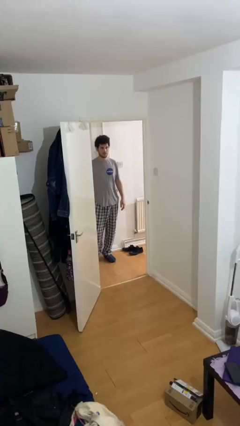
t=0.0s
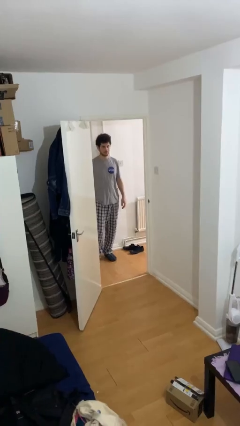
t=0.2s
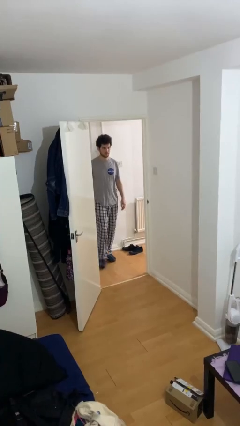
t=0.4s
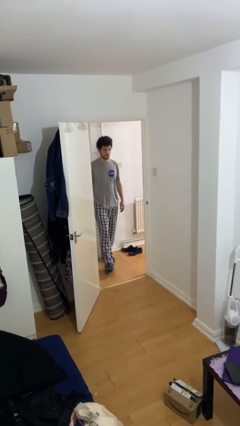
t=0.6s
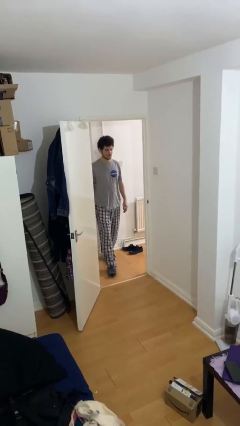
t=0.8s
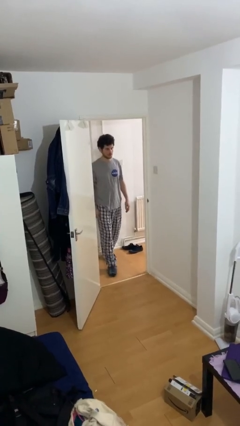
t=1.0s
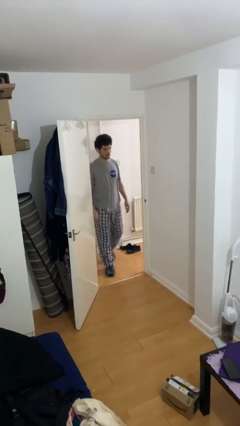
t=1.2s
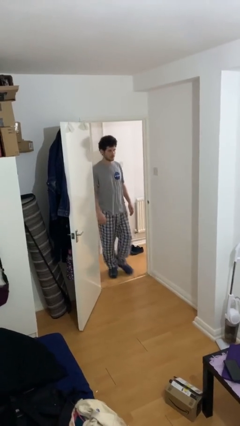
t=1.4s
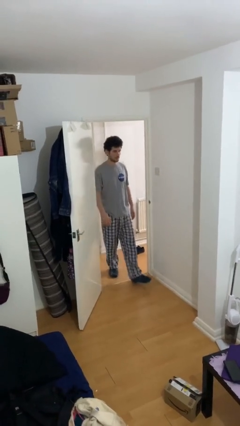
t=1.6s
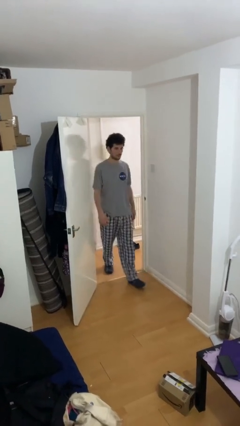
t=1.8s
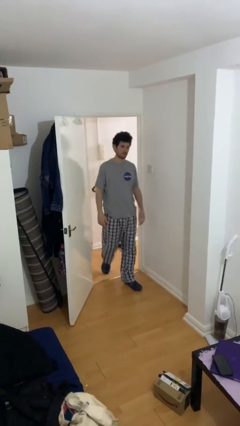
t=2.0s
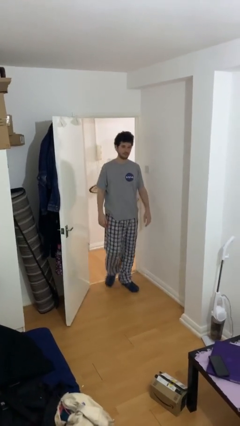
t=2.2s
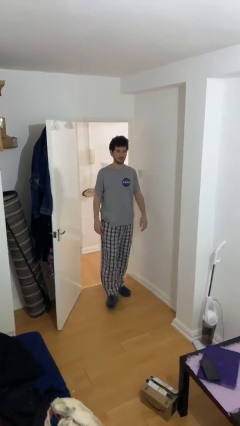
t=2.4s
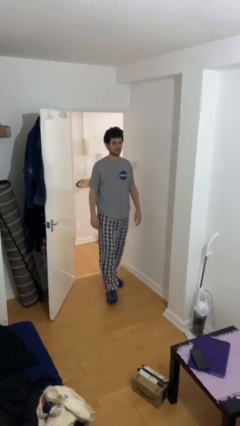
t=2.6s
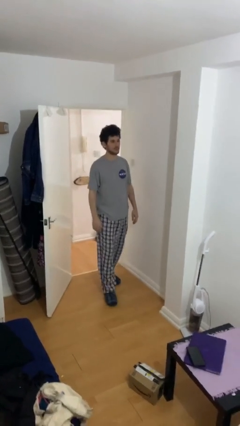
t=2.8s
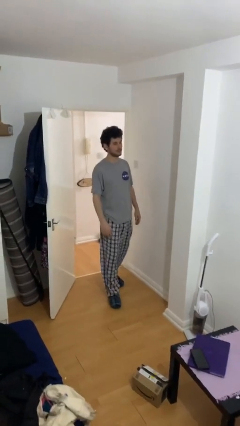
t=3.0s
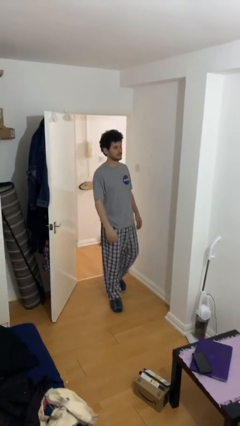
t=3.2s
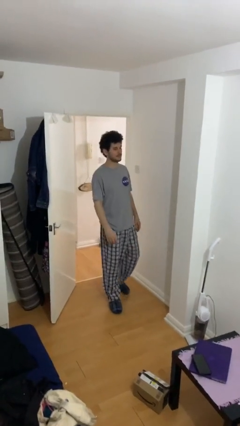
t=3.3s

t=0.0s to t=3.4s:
person enters scene through structure

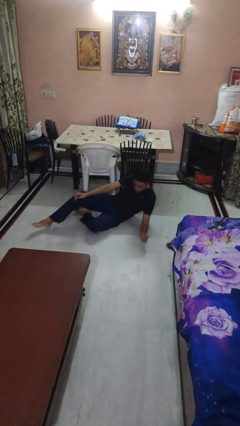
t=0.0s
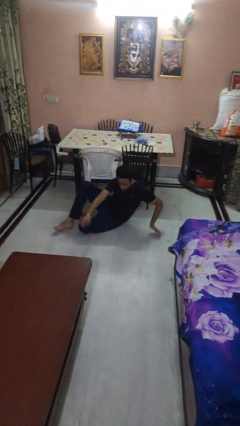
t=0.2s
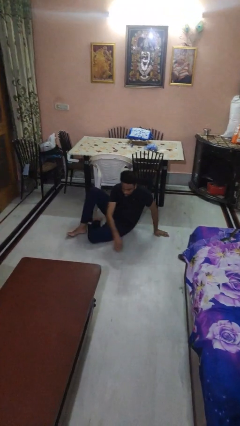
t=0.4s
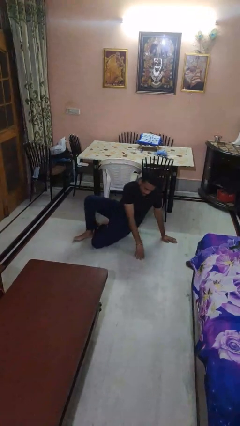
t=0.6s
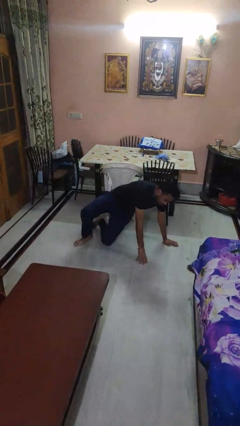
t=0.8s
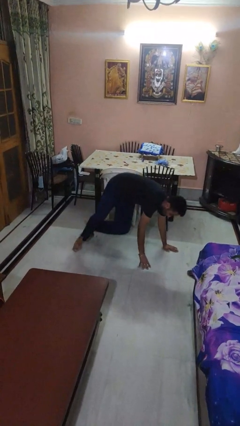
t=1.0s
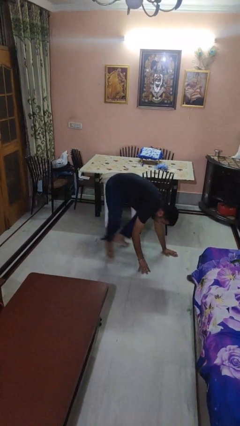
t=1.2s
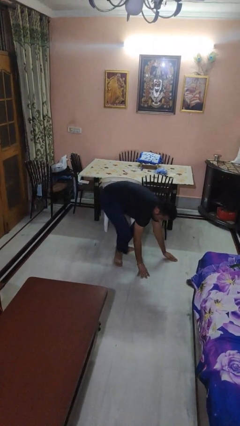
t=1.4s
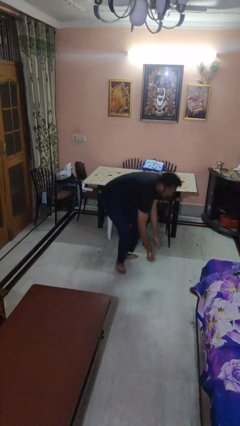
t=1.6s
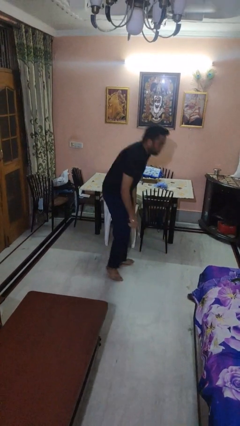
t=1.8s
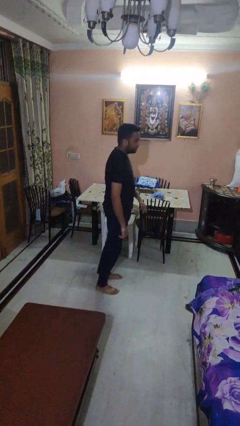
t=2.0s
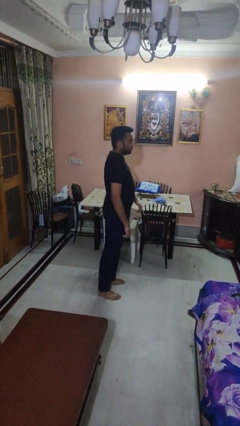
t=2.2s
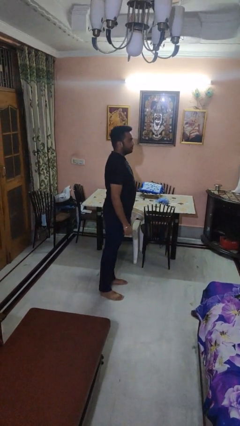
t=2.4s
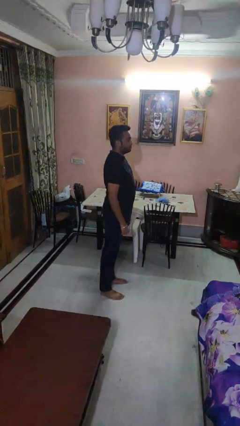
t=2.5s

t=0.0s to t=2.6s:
person stands up from floor

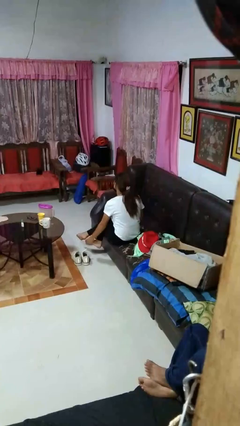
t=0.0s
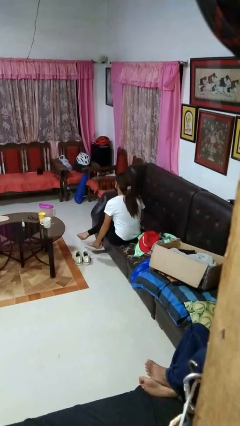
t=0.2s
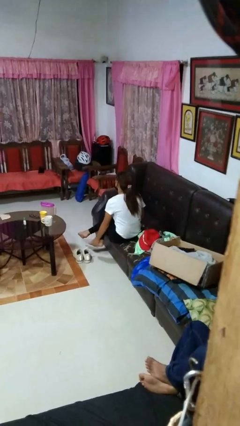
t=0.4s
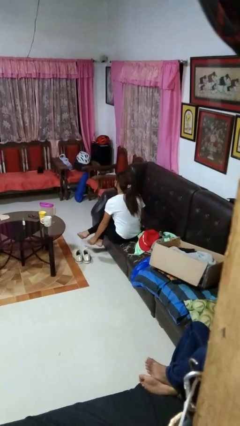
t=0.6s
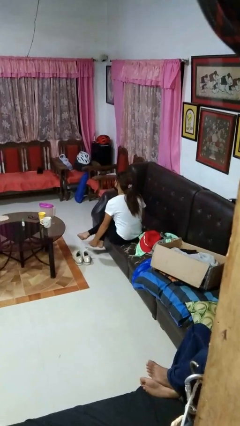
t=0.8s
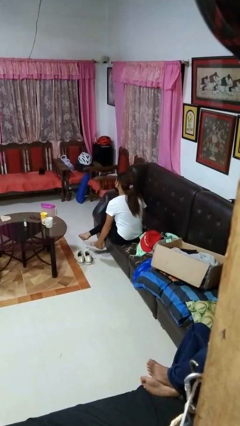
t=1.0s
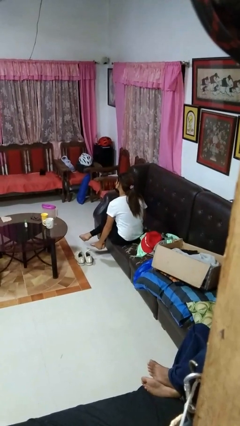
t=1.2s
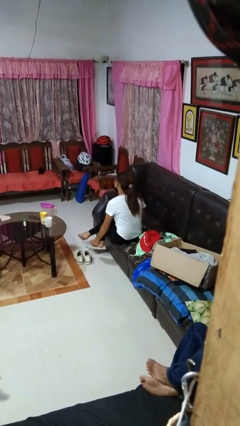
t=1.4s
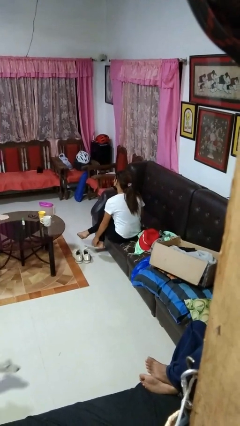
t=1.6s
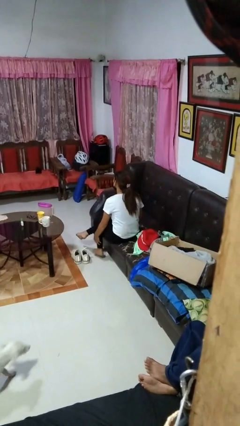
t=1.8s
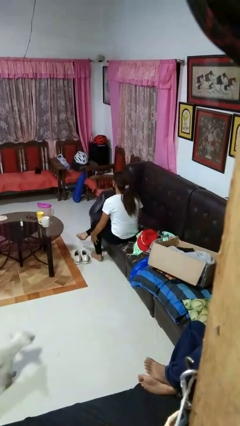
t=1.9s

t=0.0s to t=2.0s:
person rubs foot

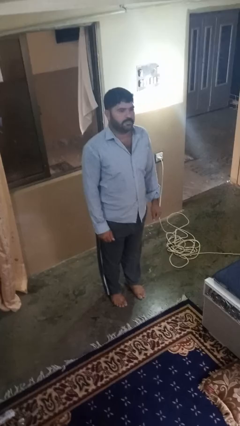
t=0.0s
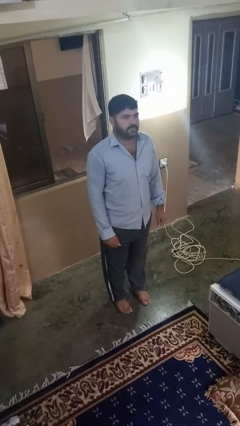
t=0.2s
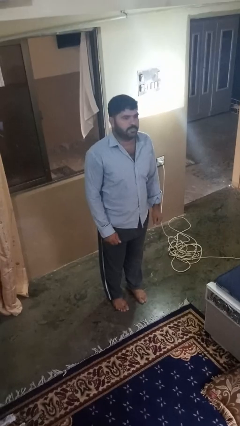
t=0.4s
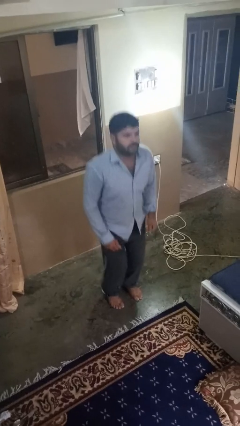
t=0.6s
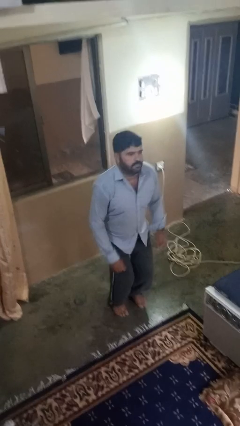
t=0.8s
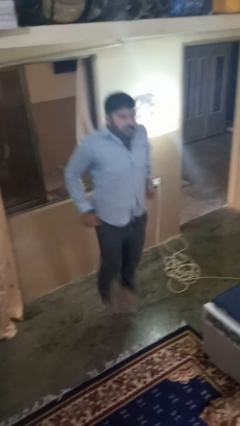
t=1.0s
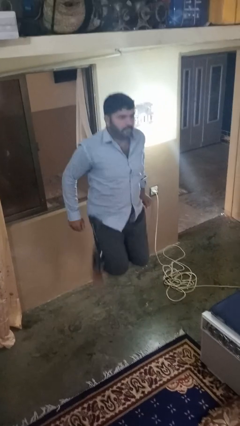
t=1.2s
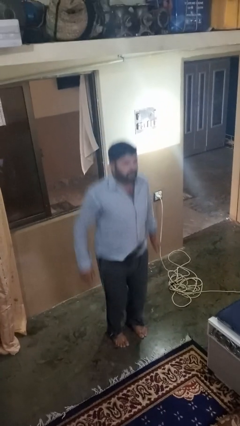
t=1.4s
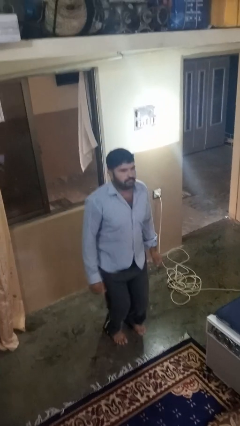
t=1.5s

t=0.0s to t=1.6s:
person jumps

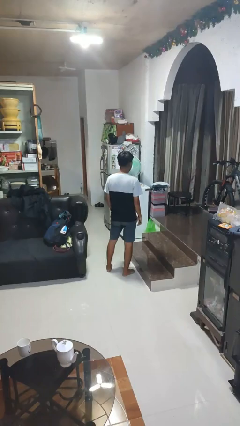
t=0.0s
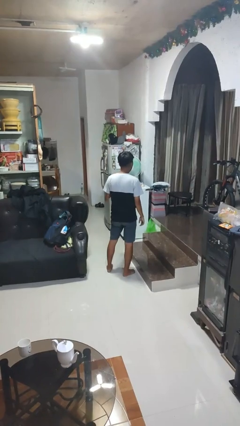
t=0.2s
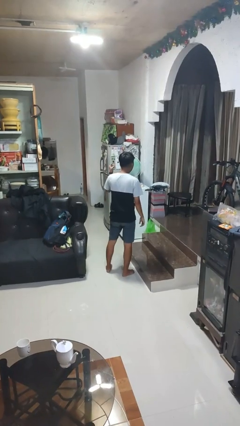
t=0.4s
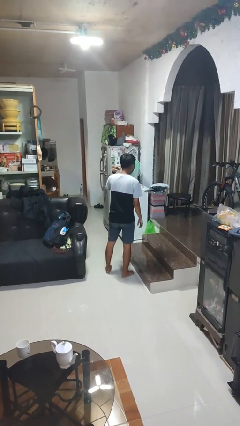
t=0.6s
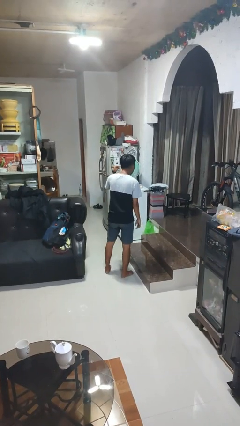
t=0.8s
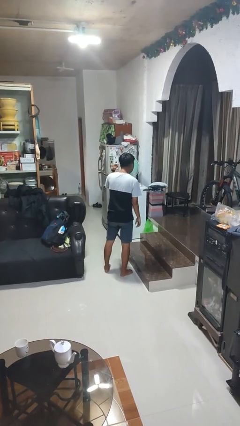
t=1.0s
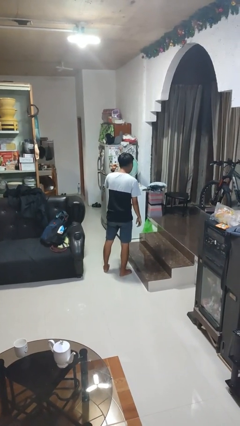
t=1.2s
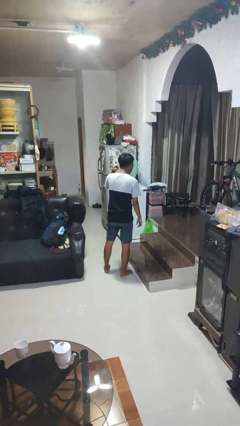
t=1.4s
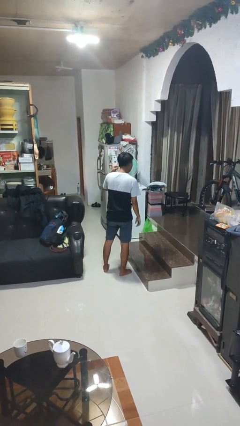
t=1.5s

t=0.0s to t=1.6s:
person gestures listen closely

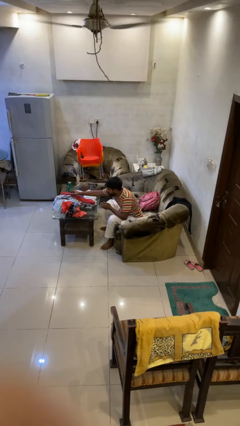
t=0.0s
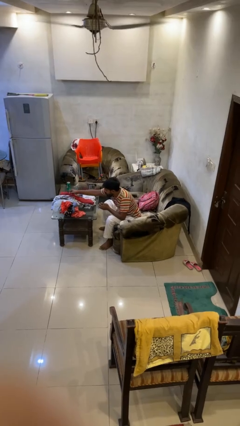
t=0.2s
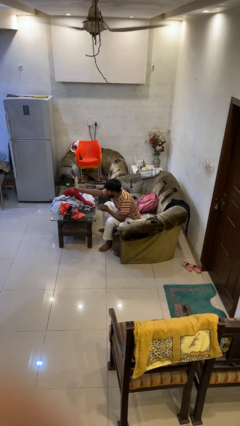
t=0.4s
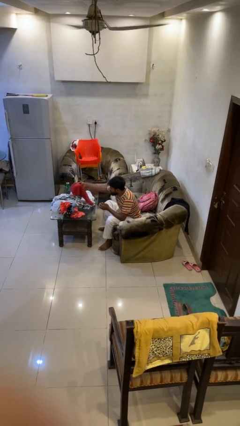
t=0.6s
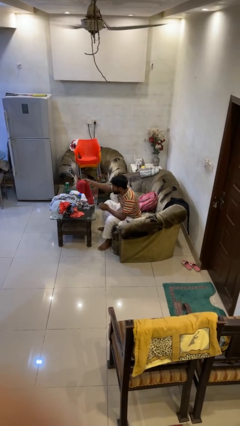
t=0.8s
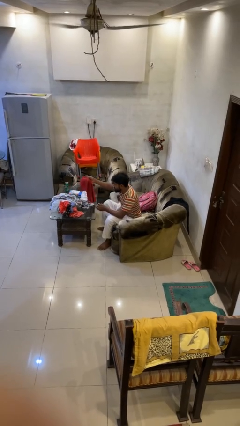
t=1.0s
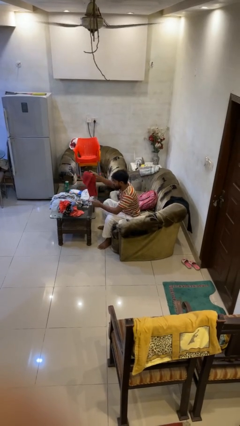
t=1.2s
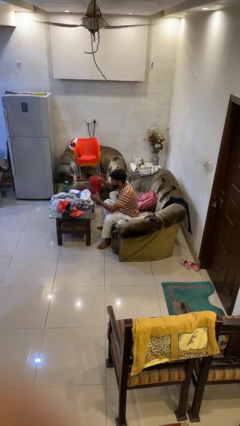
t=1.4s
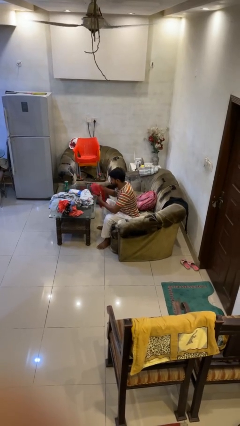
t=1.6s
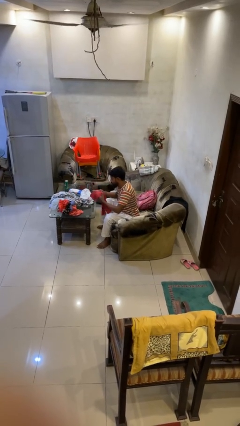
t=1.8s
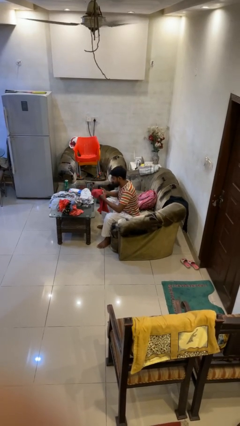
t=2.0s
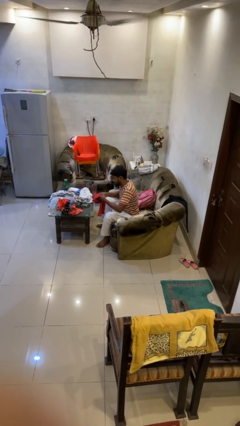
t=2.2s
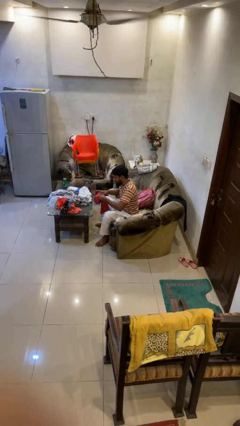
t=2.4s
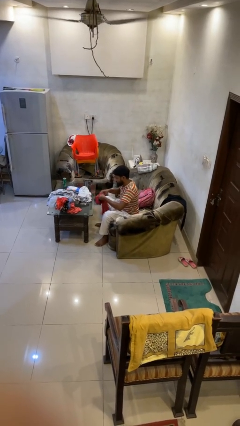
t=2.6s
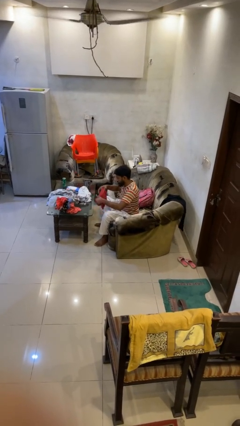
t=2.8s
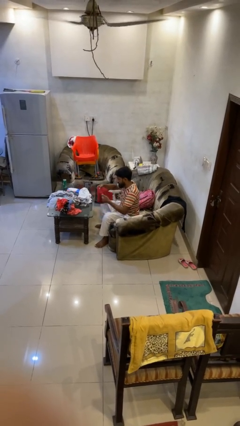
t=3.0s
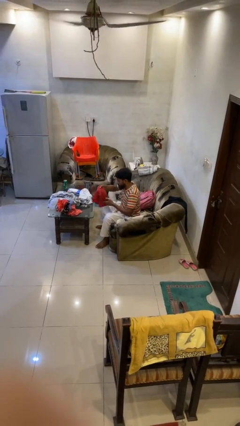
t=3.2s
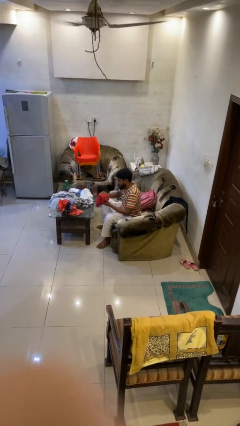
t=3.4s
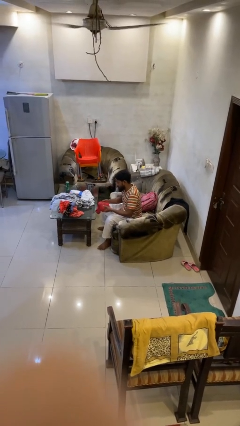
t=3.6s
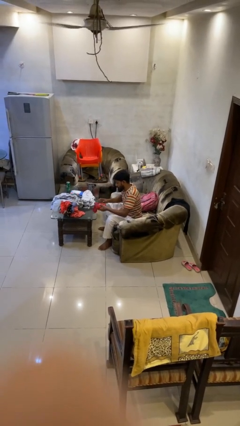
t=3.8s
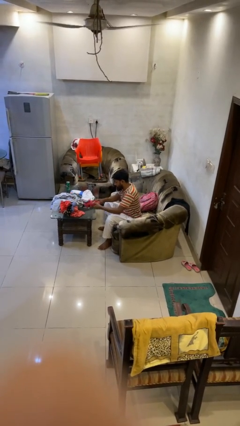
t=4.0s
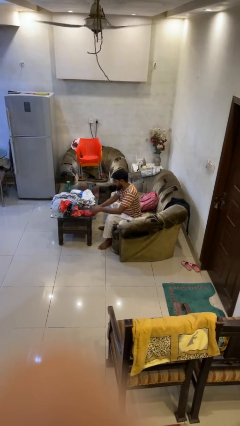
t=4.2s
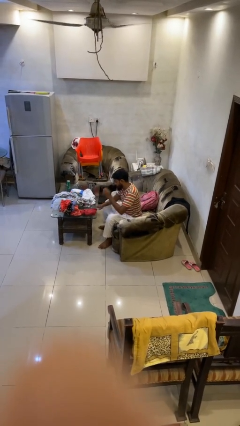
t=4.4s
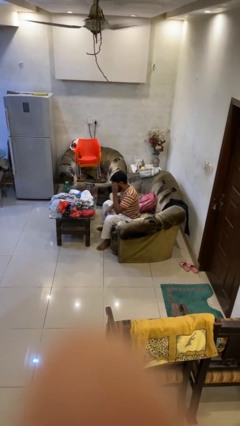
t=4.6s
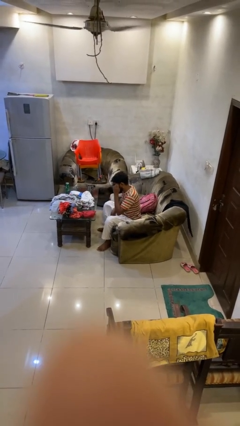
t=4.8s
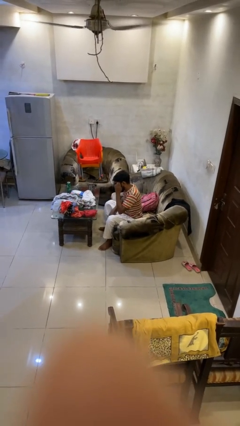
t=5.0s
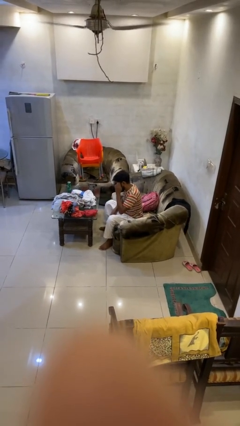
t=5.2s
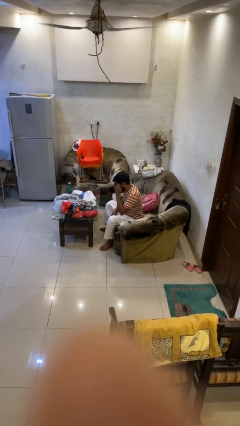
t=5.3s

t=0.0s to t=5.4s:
person folds pants

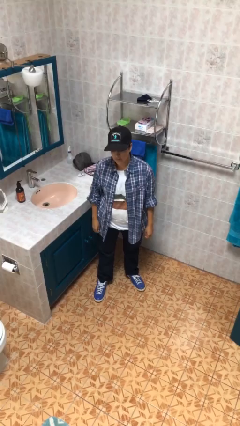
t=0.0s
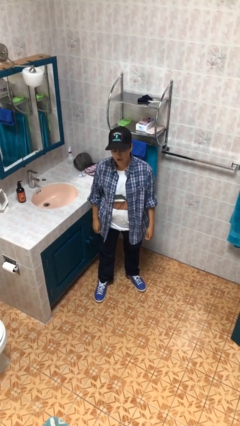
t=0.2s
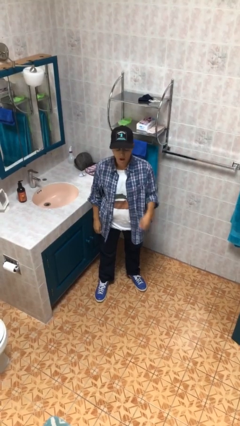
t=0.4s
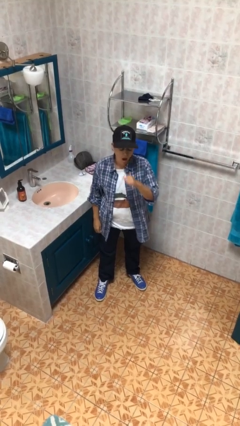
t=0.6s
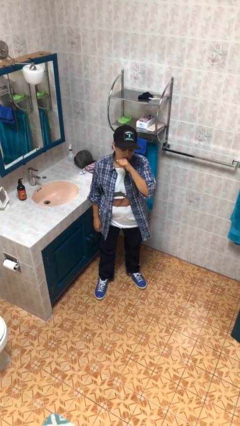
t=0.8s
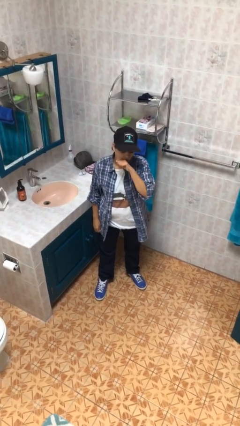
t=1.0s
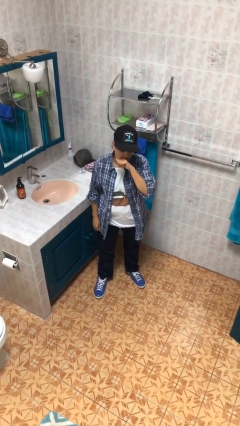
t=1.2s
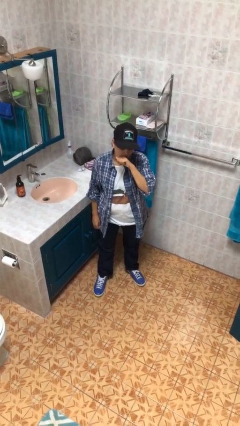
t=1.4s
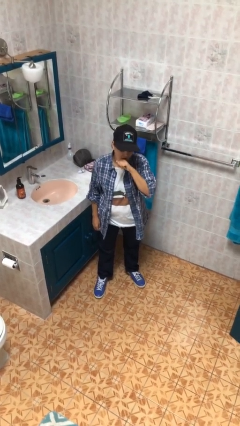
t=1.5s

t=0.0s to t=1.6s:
person yawns
